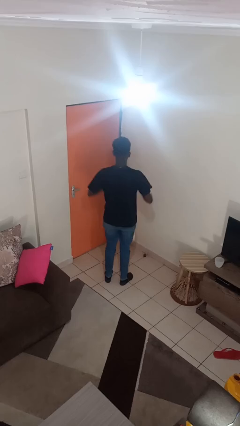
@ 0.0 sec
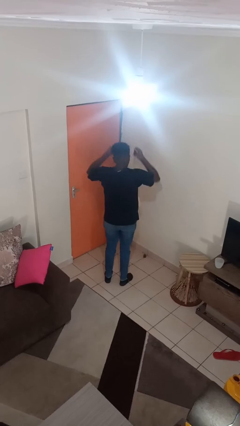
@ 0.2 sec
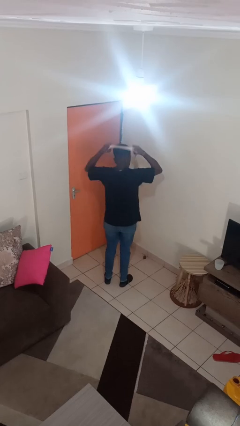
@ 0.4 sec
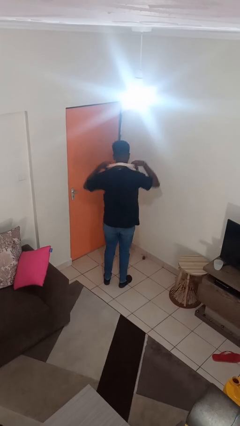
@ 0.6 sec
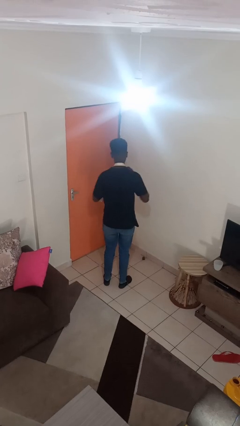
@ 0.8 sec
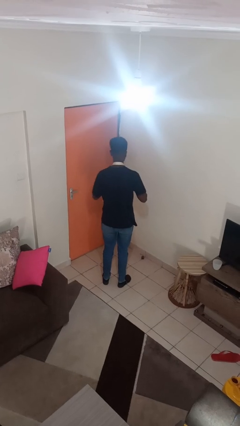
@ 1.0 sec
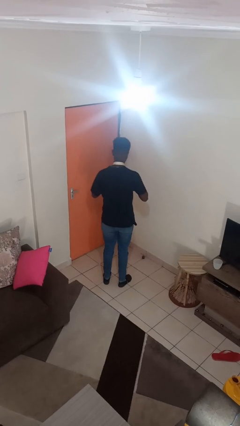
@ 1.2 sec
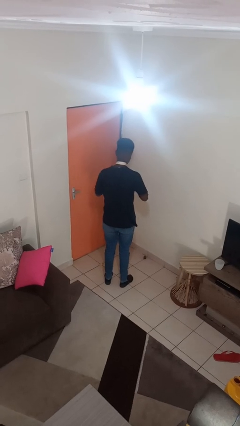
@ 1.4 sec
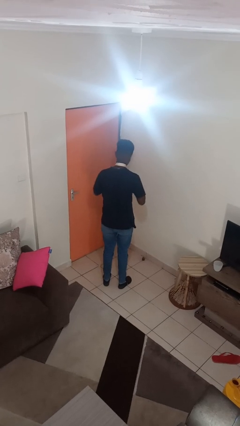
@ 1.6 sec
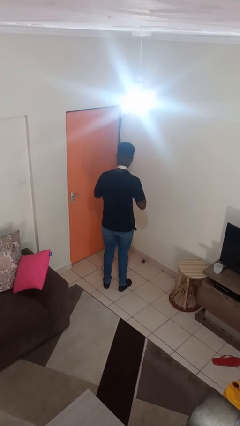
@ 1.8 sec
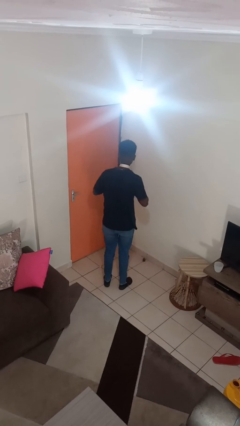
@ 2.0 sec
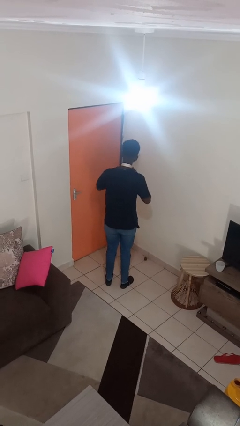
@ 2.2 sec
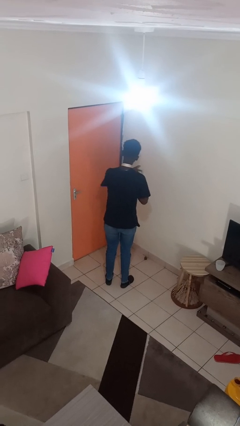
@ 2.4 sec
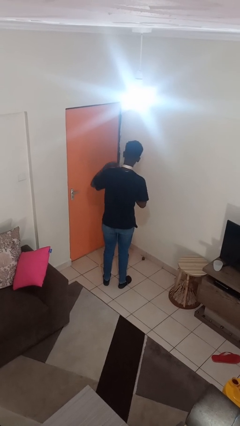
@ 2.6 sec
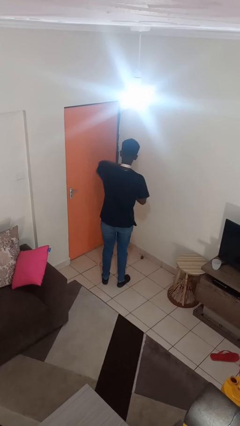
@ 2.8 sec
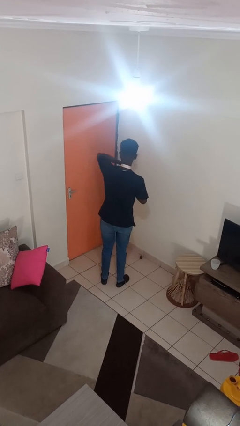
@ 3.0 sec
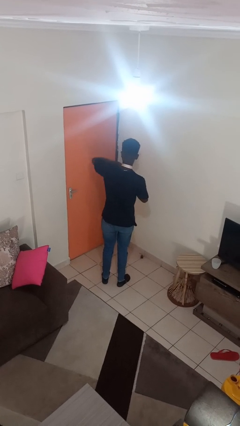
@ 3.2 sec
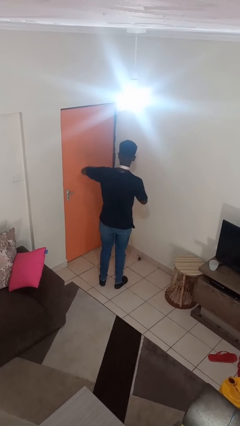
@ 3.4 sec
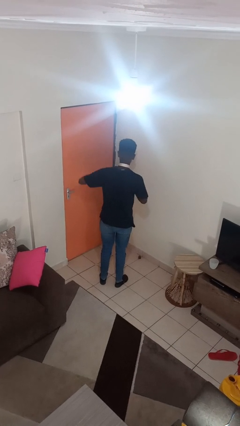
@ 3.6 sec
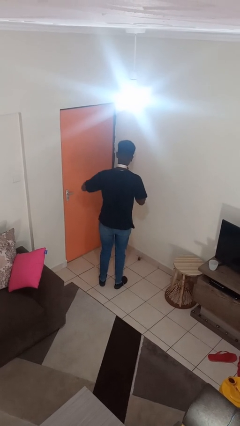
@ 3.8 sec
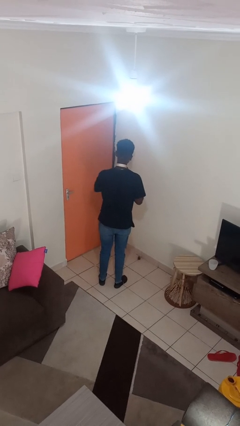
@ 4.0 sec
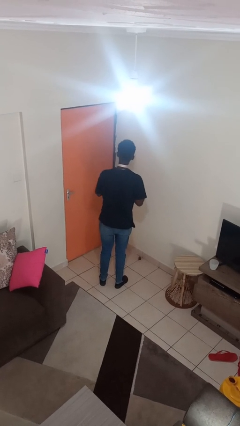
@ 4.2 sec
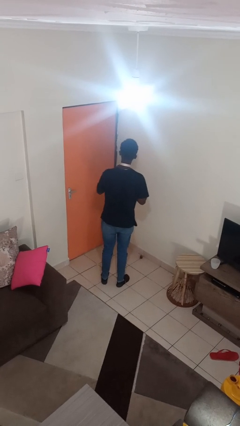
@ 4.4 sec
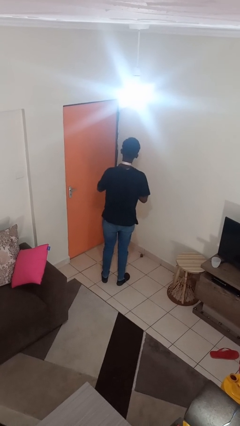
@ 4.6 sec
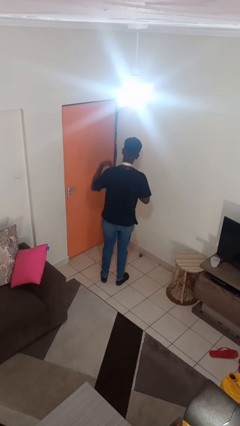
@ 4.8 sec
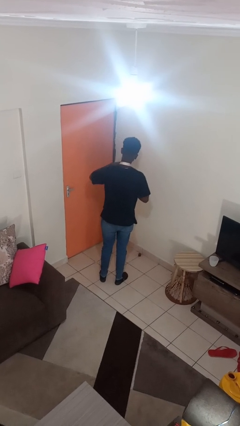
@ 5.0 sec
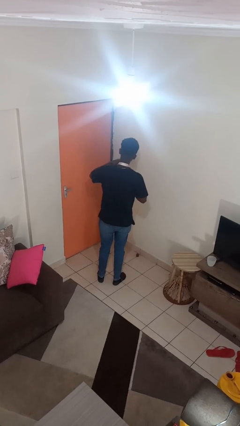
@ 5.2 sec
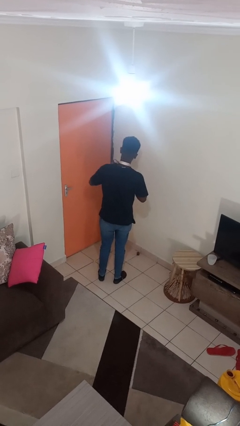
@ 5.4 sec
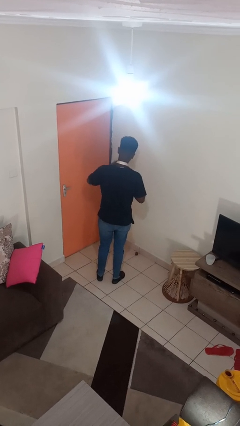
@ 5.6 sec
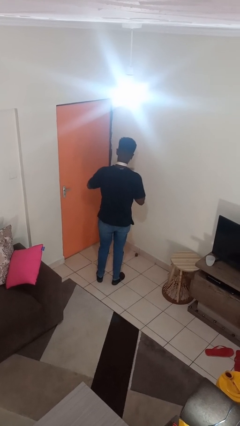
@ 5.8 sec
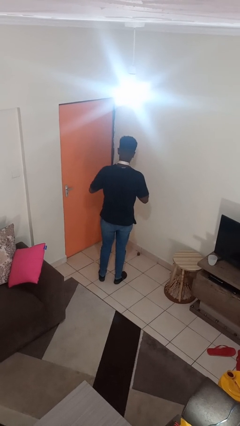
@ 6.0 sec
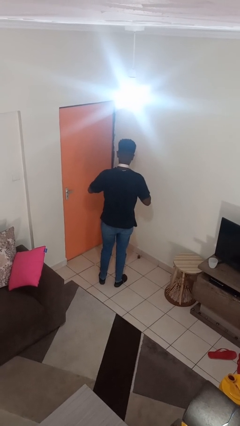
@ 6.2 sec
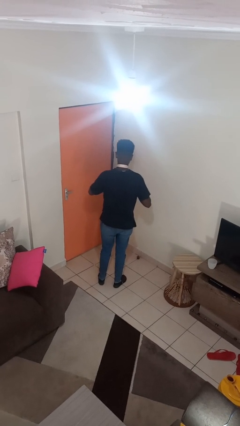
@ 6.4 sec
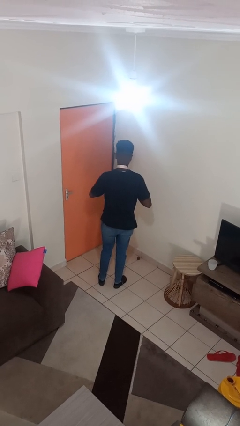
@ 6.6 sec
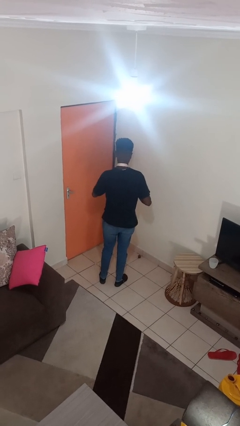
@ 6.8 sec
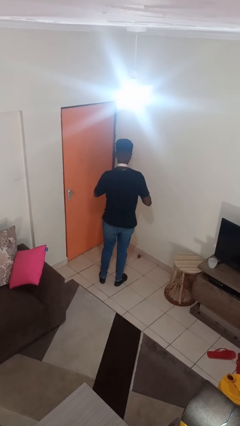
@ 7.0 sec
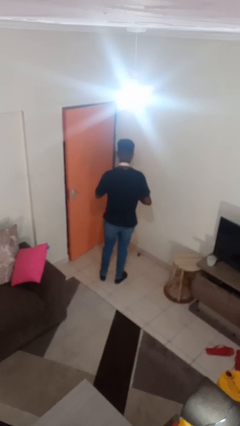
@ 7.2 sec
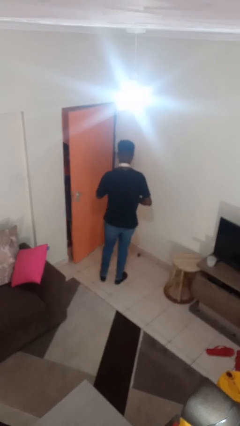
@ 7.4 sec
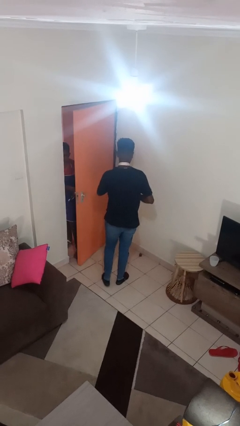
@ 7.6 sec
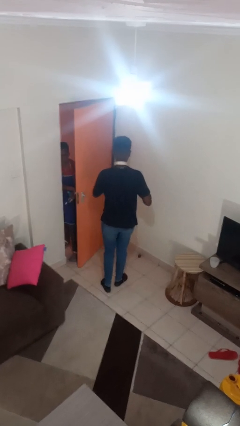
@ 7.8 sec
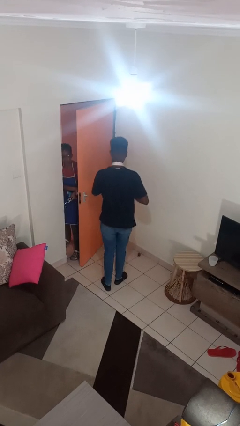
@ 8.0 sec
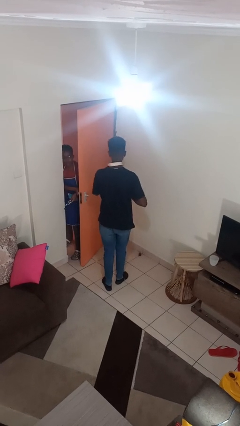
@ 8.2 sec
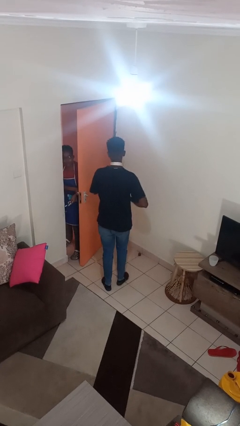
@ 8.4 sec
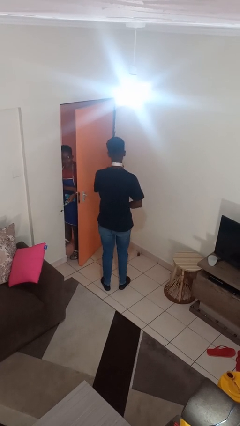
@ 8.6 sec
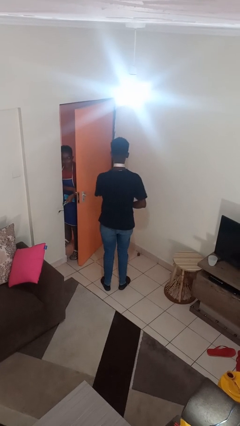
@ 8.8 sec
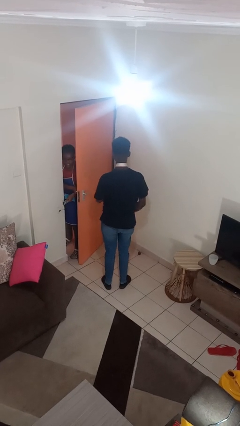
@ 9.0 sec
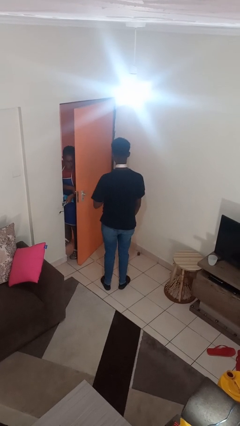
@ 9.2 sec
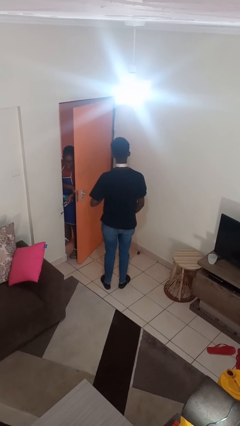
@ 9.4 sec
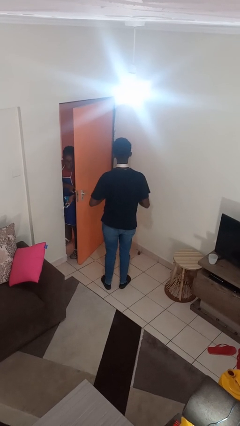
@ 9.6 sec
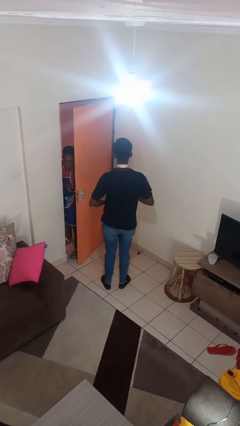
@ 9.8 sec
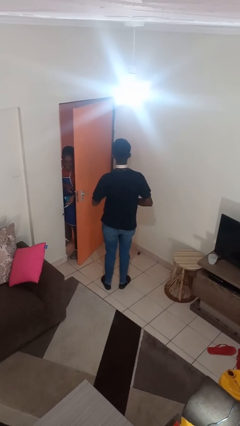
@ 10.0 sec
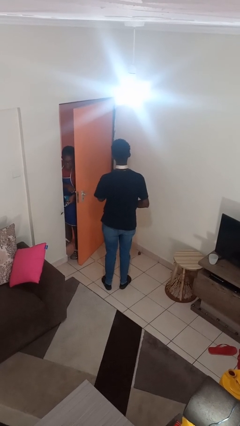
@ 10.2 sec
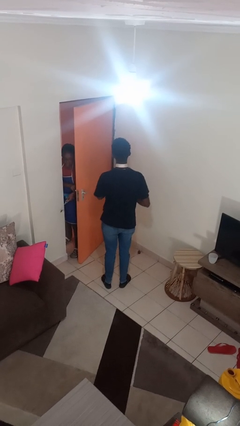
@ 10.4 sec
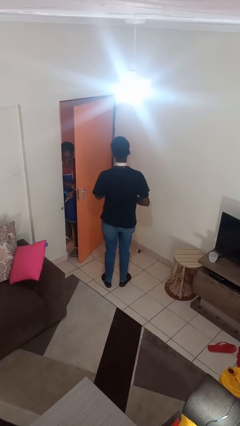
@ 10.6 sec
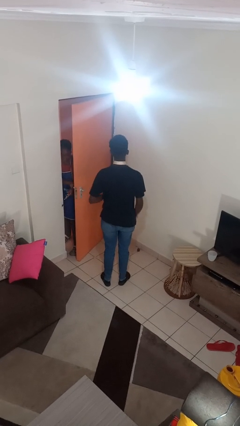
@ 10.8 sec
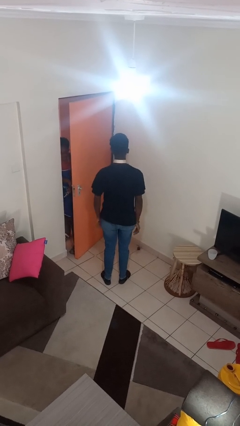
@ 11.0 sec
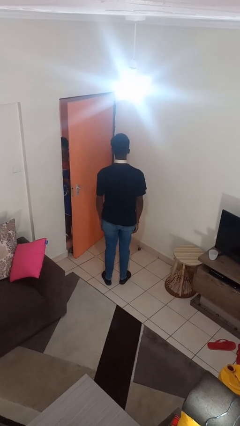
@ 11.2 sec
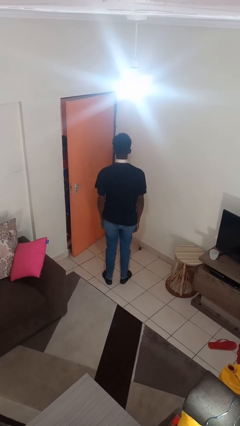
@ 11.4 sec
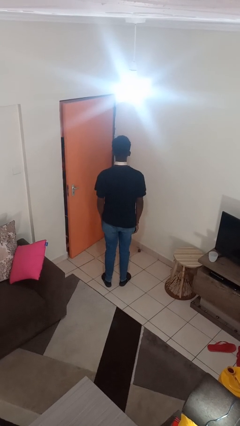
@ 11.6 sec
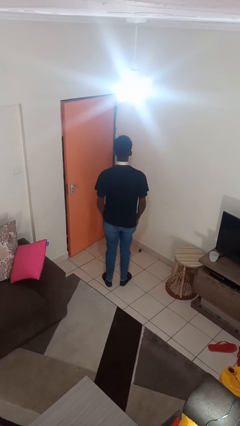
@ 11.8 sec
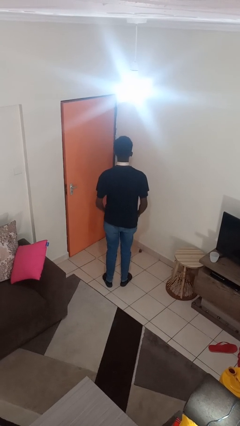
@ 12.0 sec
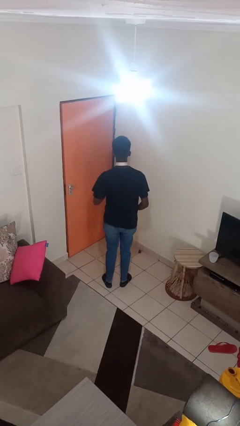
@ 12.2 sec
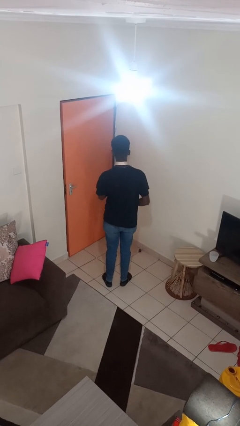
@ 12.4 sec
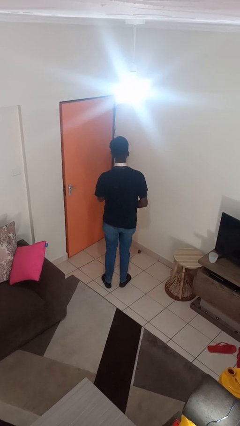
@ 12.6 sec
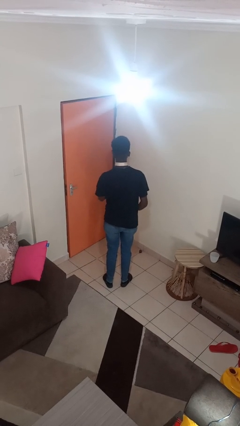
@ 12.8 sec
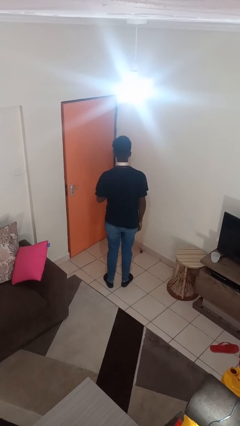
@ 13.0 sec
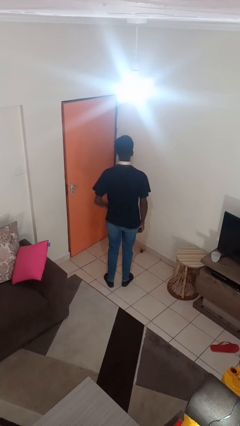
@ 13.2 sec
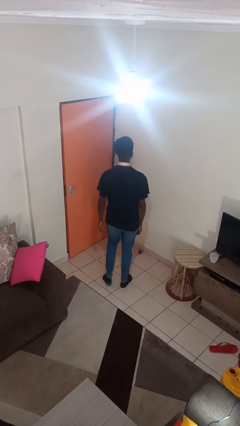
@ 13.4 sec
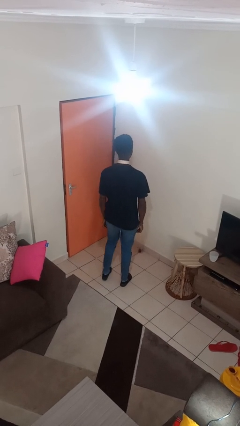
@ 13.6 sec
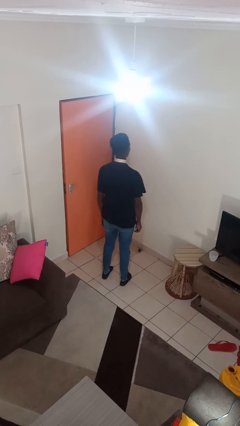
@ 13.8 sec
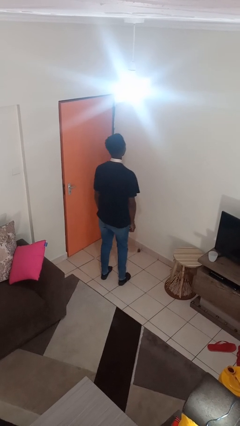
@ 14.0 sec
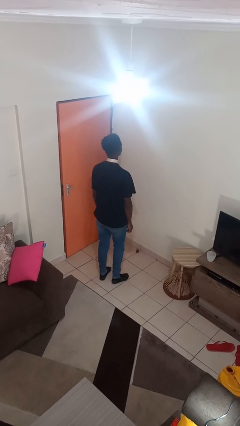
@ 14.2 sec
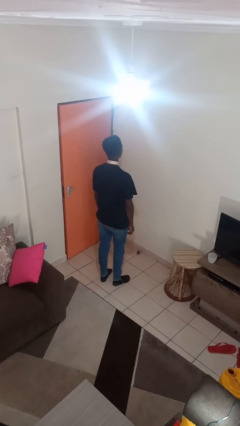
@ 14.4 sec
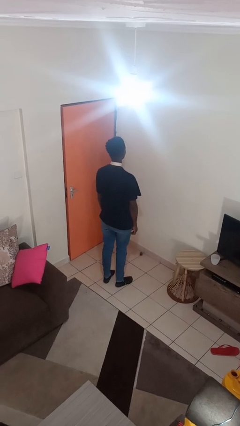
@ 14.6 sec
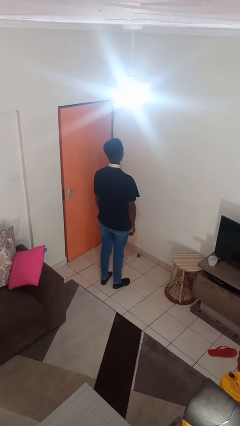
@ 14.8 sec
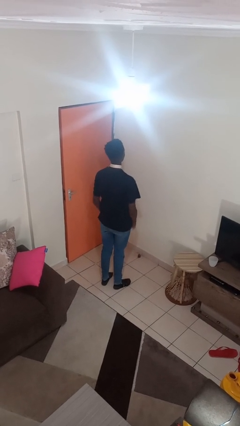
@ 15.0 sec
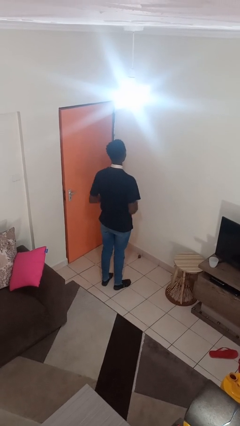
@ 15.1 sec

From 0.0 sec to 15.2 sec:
person puts on necktie

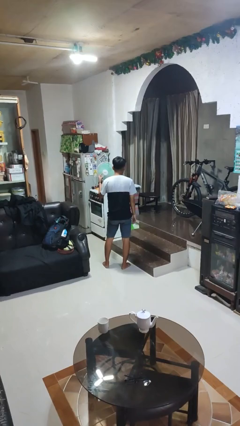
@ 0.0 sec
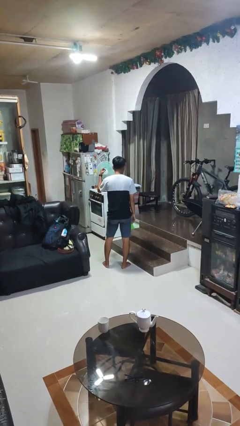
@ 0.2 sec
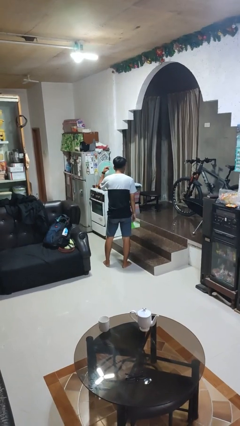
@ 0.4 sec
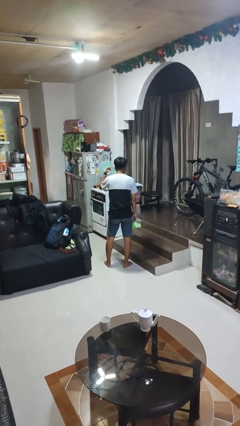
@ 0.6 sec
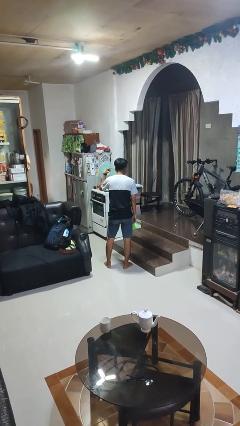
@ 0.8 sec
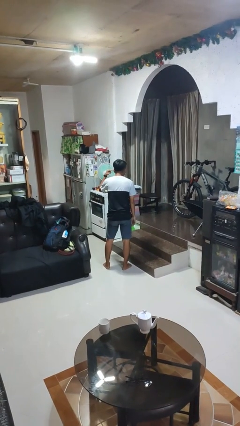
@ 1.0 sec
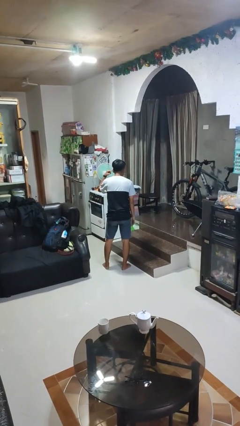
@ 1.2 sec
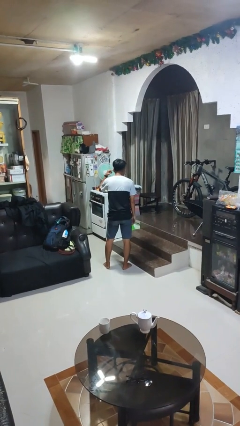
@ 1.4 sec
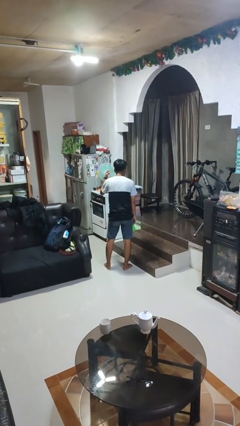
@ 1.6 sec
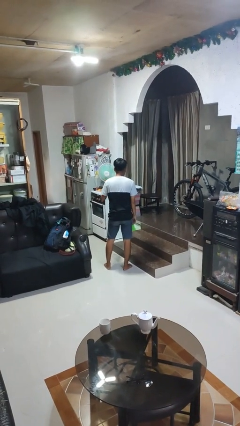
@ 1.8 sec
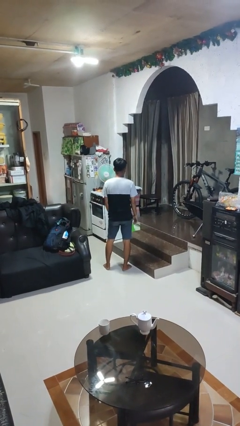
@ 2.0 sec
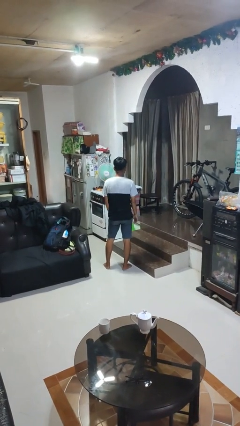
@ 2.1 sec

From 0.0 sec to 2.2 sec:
person gestures listen closely

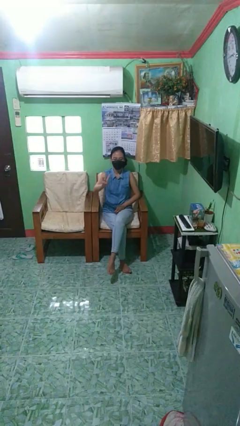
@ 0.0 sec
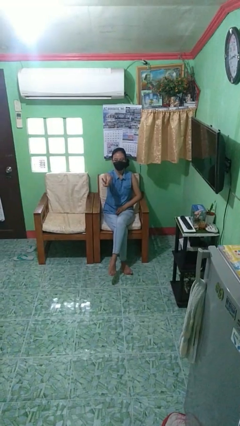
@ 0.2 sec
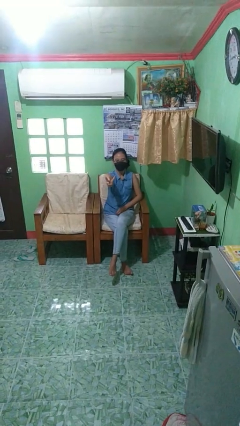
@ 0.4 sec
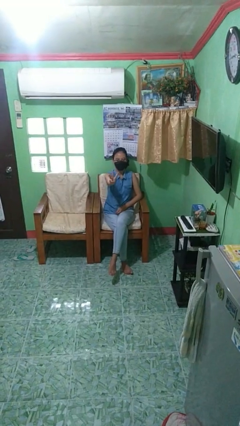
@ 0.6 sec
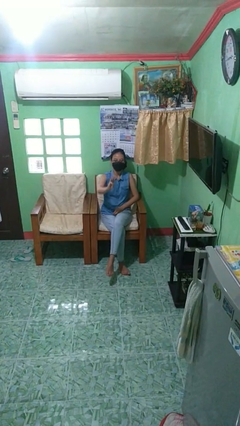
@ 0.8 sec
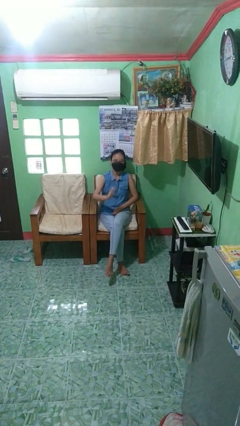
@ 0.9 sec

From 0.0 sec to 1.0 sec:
person gestures number three
